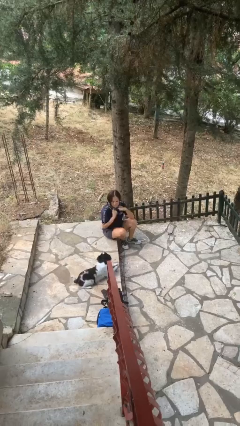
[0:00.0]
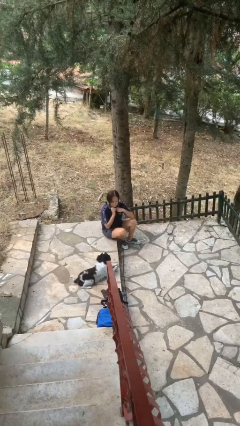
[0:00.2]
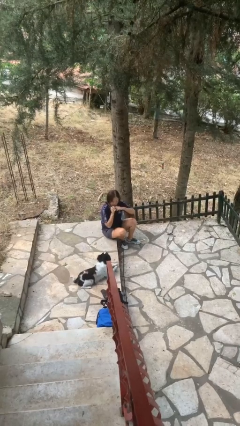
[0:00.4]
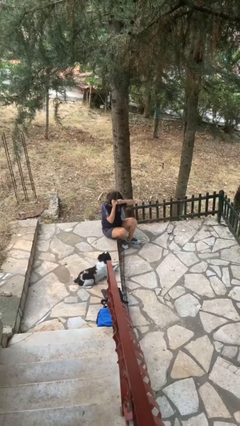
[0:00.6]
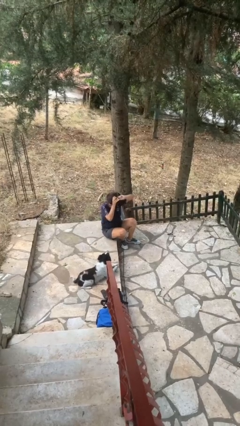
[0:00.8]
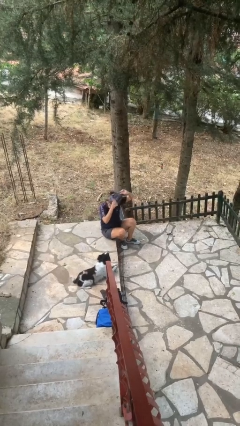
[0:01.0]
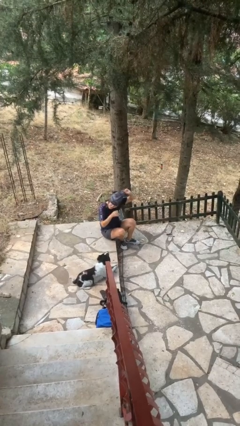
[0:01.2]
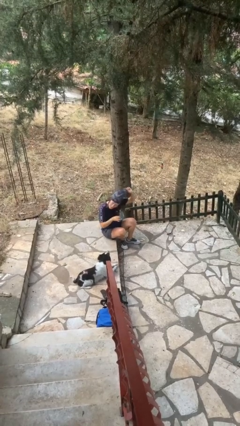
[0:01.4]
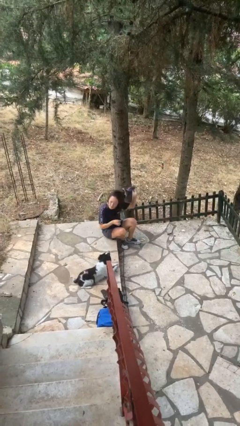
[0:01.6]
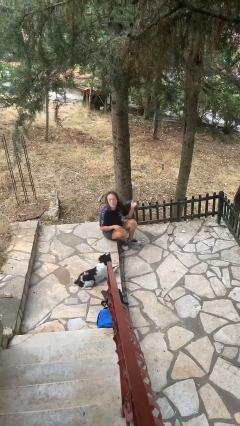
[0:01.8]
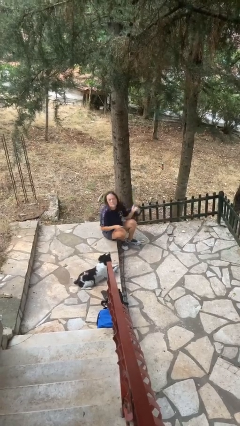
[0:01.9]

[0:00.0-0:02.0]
person takes off scarf

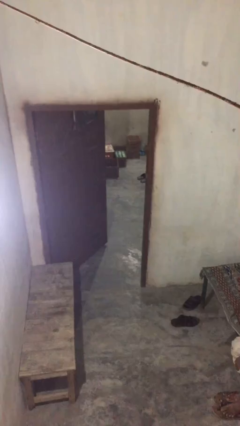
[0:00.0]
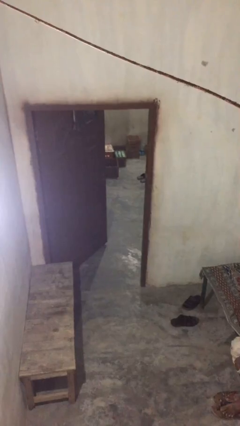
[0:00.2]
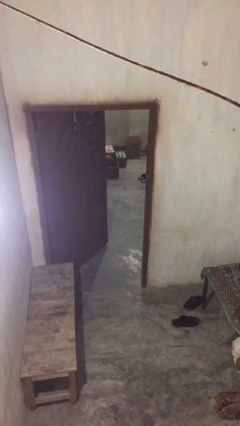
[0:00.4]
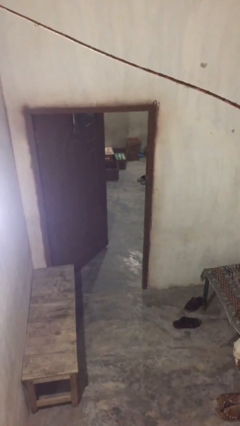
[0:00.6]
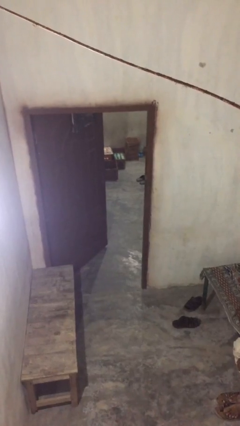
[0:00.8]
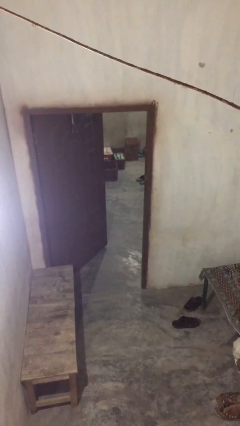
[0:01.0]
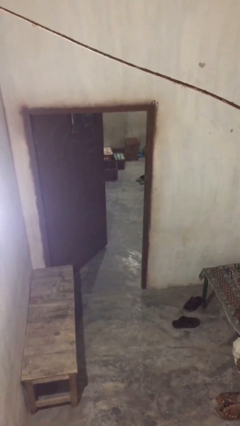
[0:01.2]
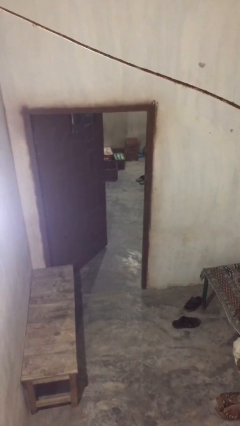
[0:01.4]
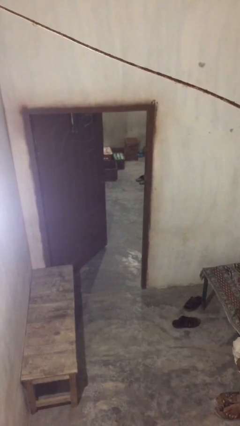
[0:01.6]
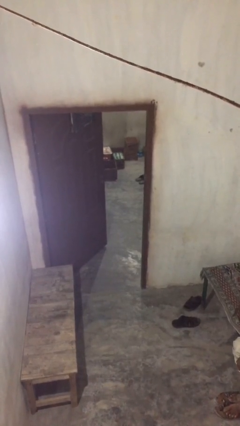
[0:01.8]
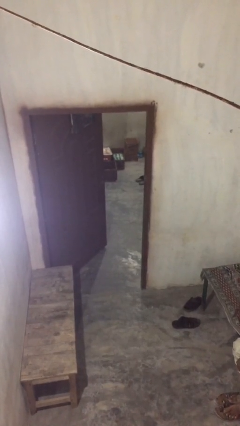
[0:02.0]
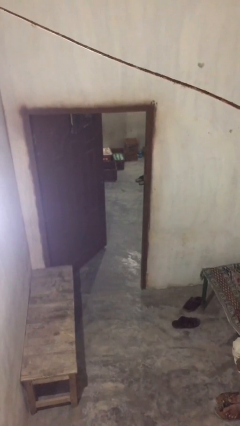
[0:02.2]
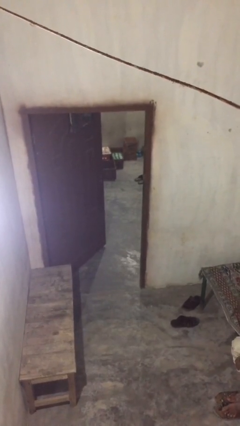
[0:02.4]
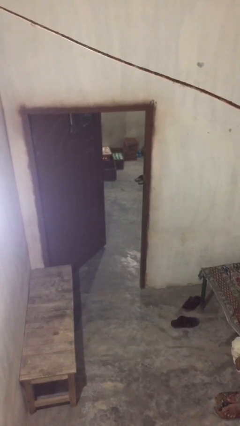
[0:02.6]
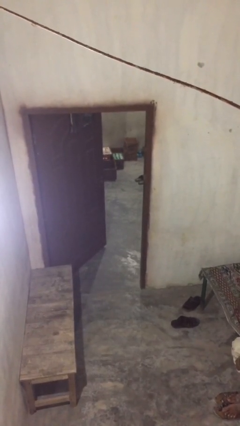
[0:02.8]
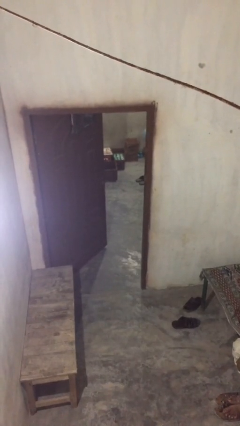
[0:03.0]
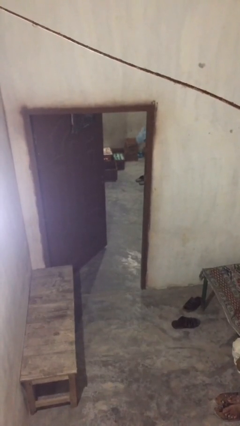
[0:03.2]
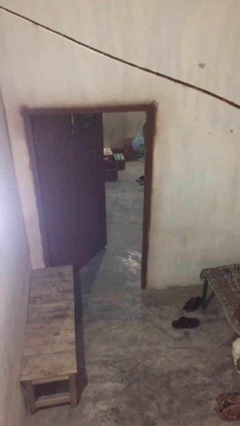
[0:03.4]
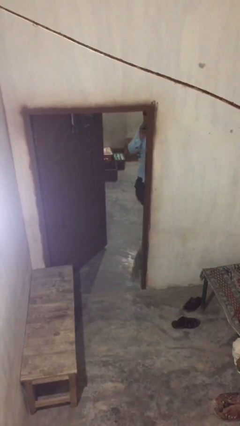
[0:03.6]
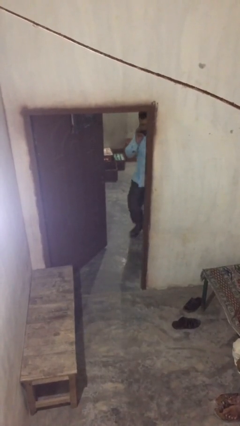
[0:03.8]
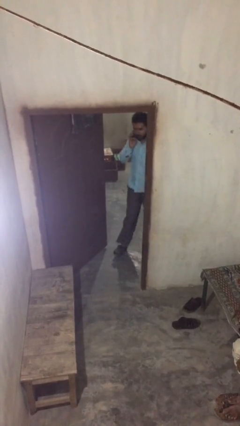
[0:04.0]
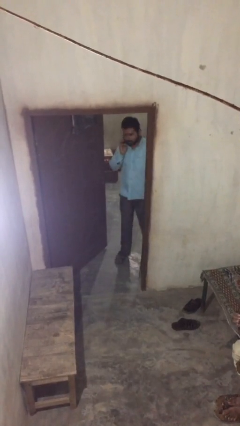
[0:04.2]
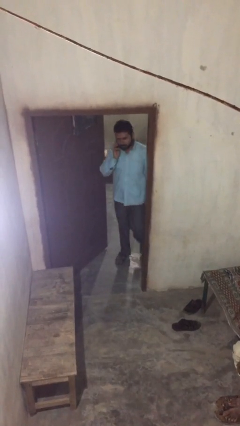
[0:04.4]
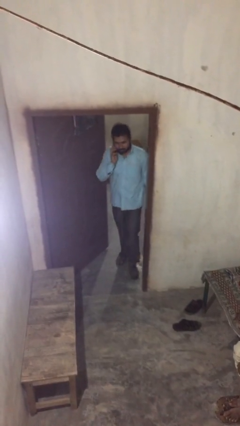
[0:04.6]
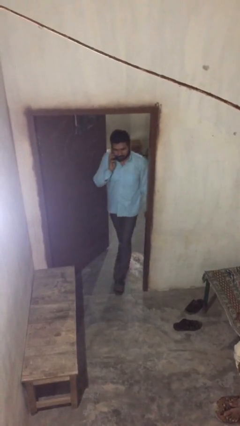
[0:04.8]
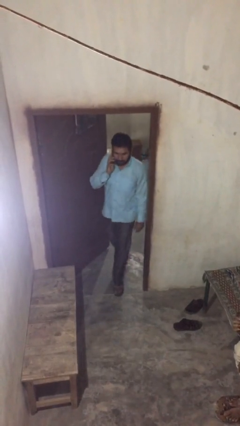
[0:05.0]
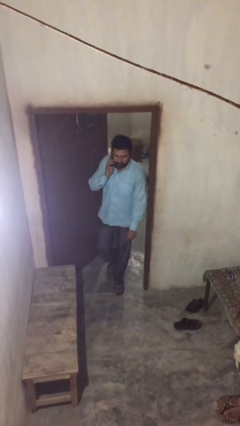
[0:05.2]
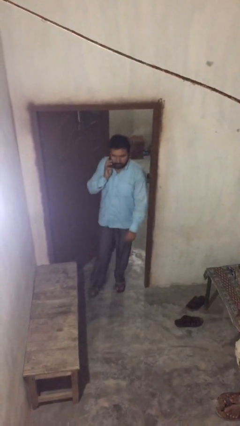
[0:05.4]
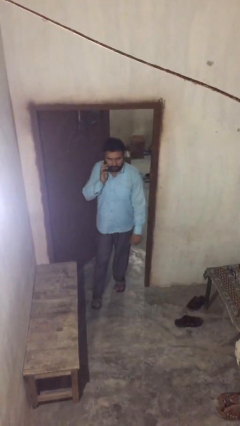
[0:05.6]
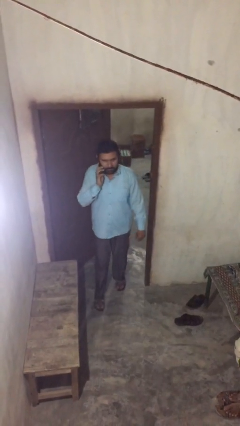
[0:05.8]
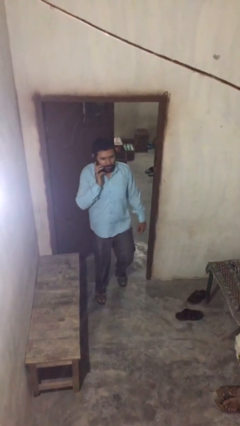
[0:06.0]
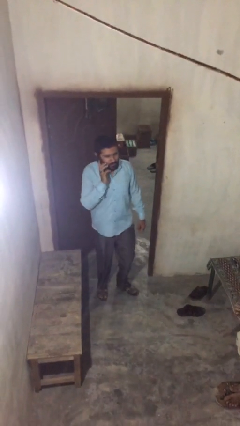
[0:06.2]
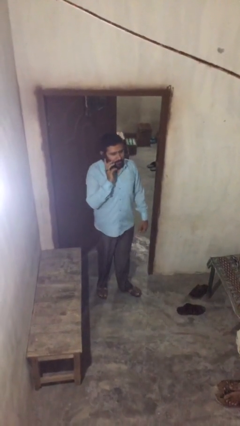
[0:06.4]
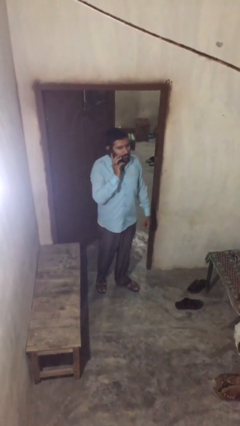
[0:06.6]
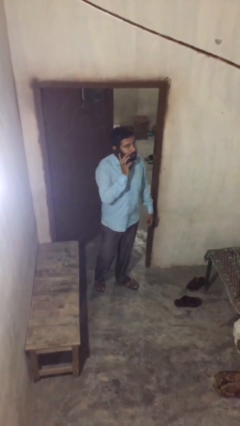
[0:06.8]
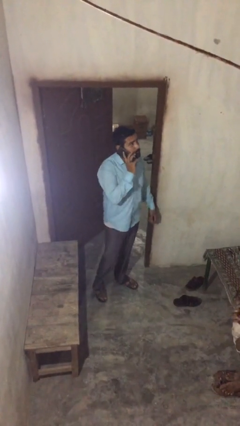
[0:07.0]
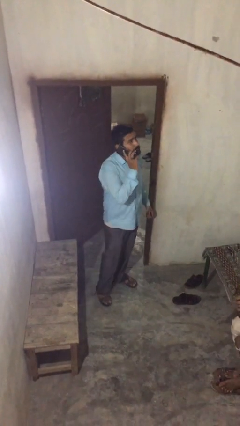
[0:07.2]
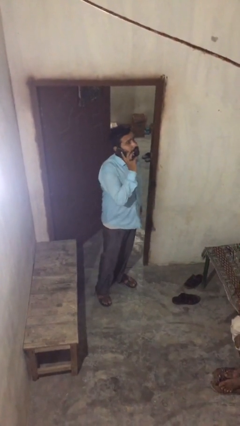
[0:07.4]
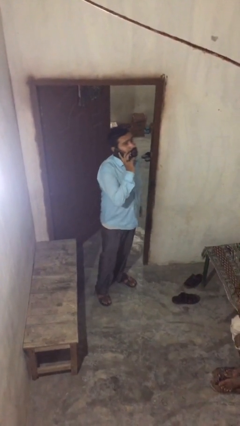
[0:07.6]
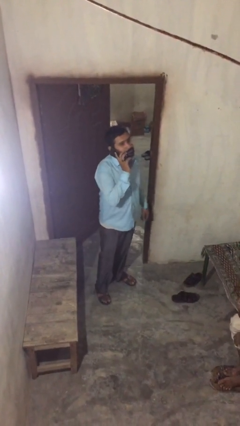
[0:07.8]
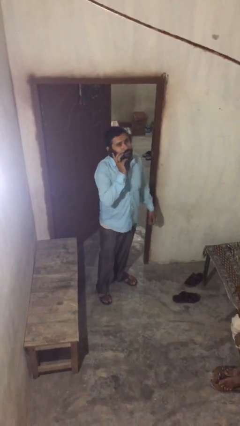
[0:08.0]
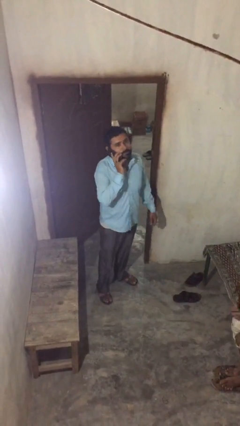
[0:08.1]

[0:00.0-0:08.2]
person enters scene through structure

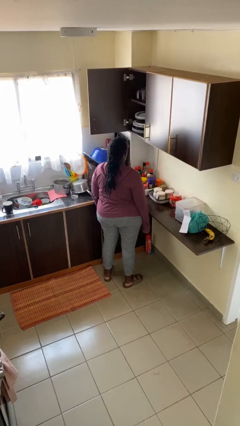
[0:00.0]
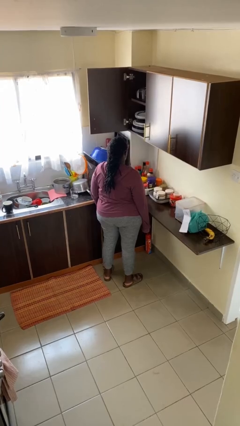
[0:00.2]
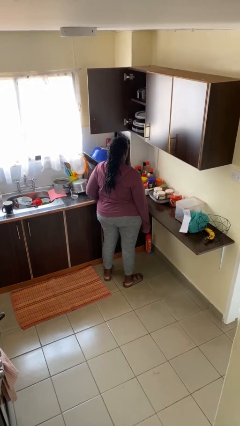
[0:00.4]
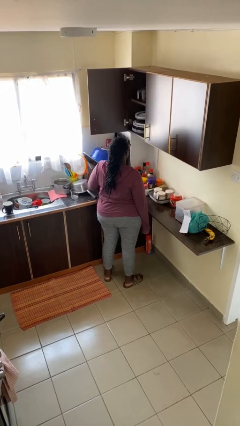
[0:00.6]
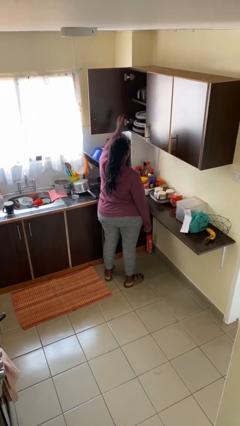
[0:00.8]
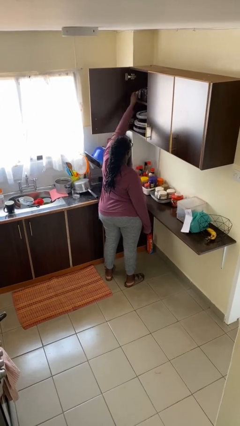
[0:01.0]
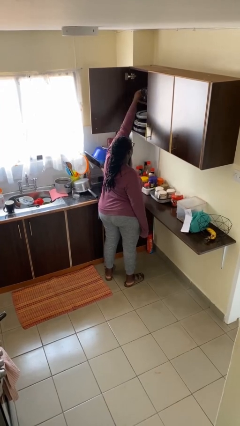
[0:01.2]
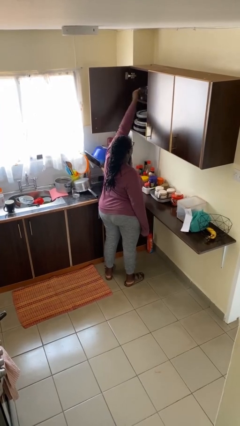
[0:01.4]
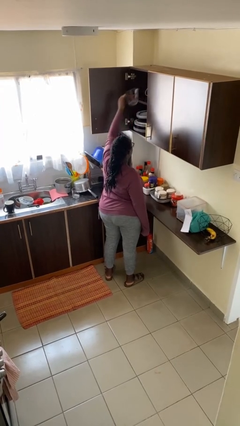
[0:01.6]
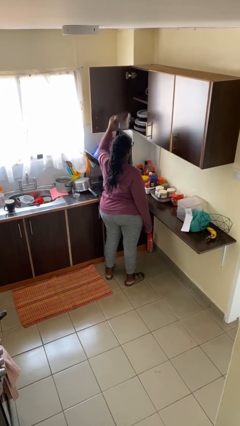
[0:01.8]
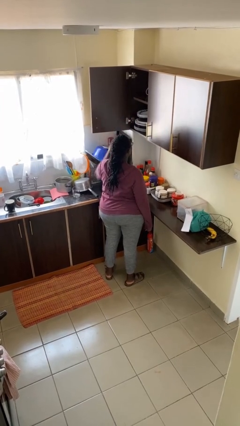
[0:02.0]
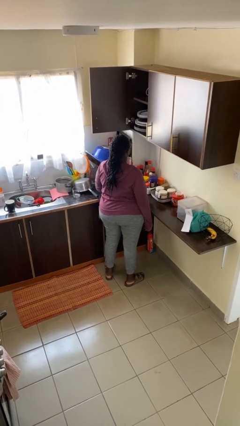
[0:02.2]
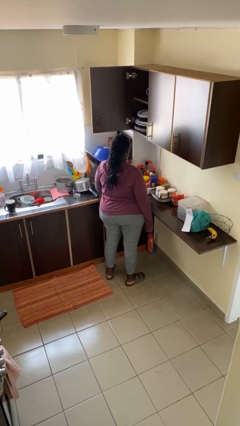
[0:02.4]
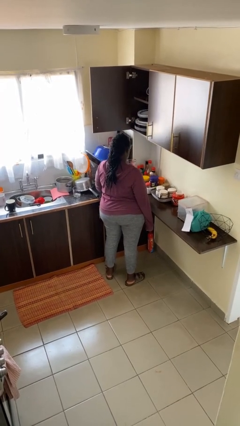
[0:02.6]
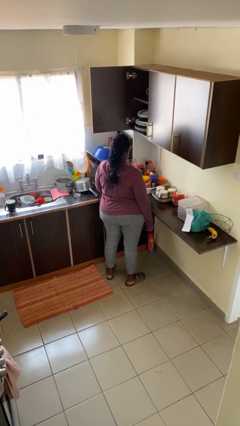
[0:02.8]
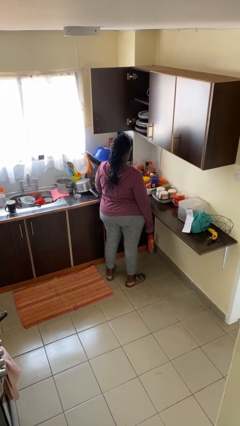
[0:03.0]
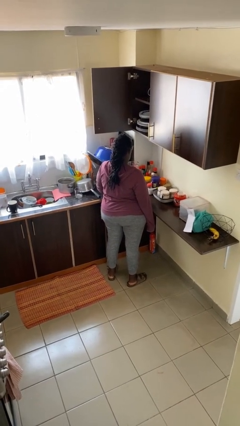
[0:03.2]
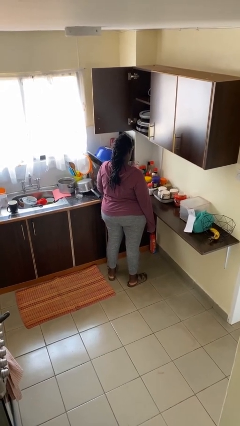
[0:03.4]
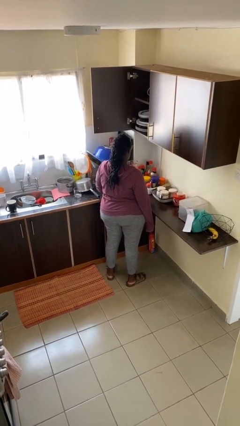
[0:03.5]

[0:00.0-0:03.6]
person picks up object from cabinet

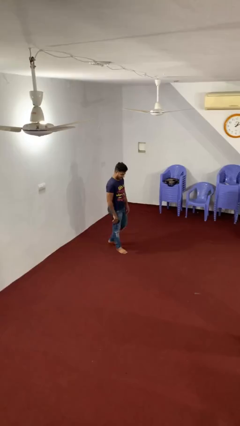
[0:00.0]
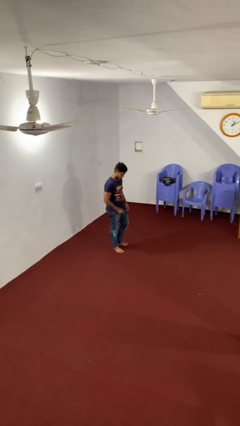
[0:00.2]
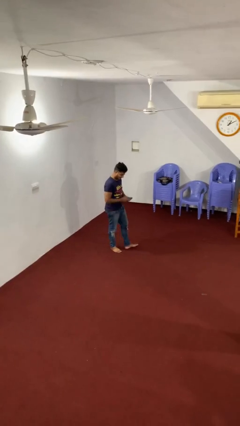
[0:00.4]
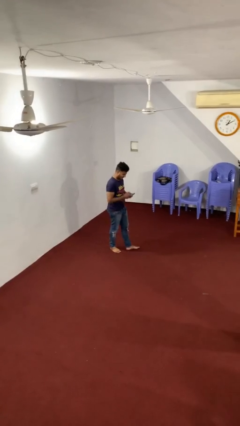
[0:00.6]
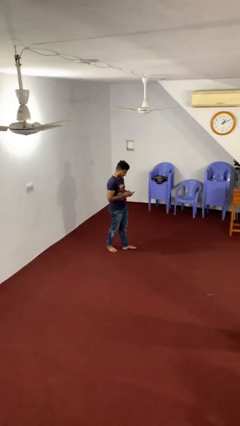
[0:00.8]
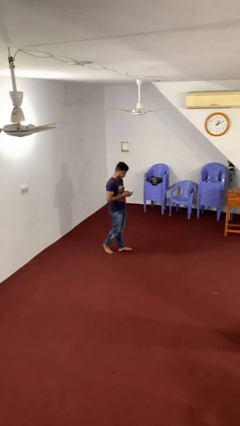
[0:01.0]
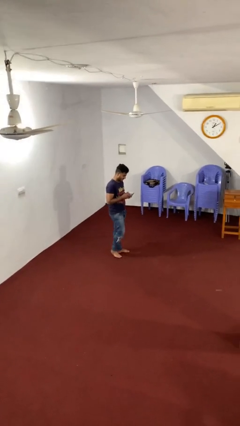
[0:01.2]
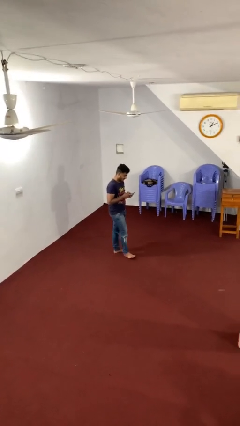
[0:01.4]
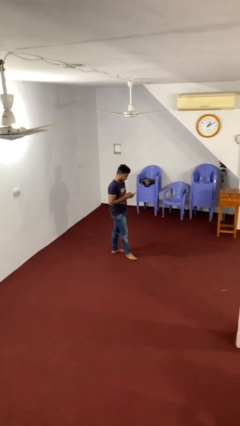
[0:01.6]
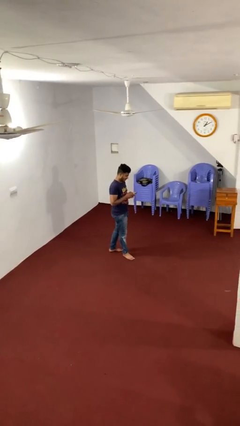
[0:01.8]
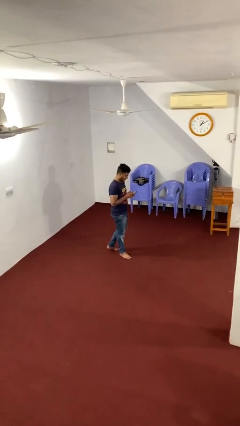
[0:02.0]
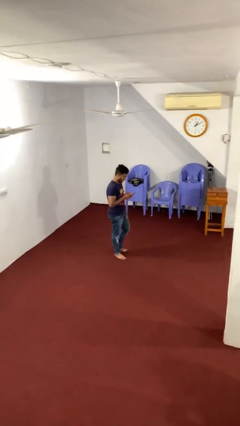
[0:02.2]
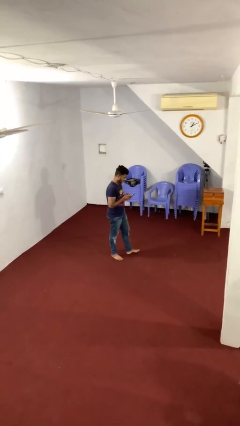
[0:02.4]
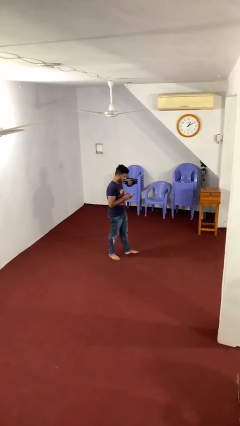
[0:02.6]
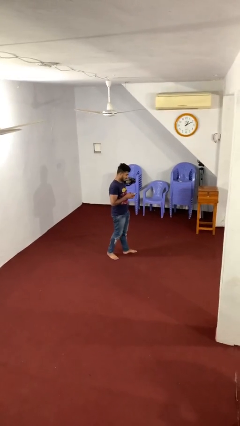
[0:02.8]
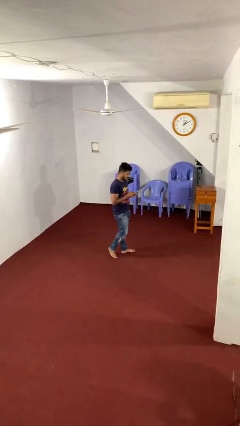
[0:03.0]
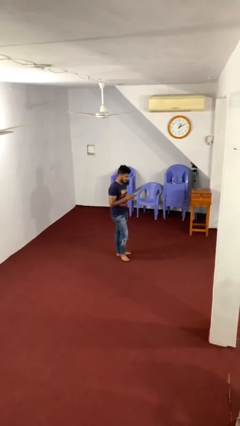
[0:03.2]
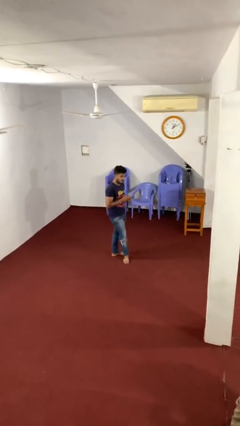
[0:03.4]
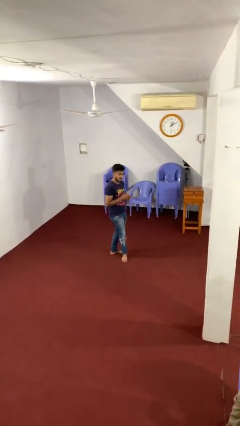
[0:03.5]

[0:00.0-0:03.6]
person texts on phone

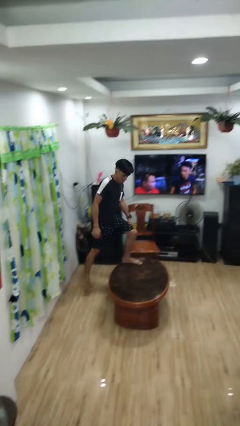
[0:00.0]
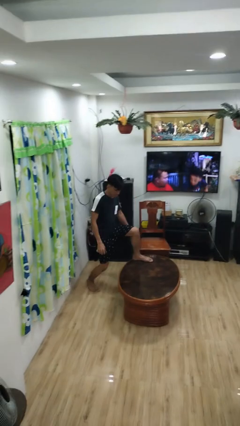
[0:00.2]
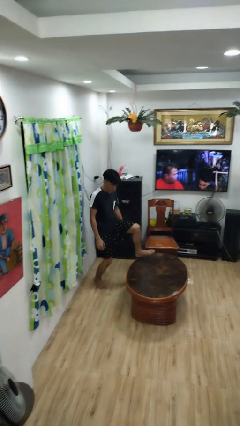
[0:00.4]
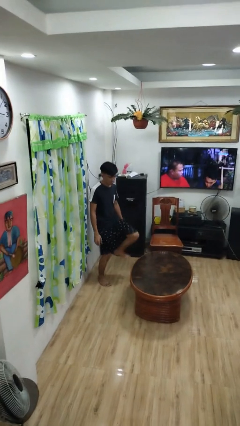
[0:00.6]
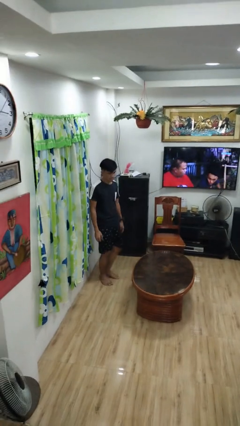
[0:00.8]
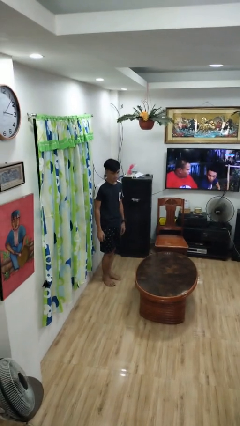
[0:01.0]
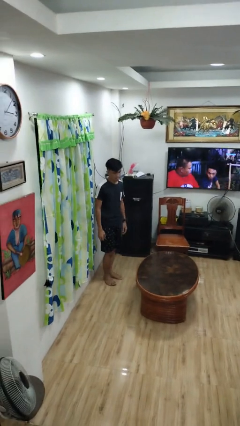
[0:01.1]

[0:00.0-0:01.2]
person climbs off table
